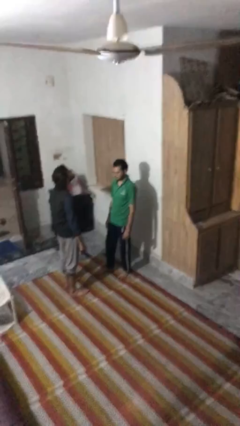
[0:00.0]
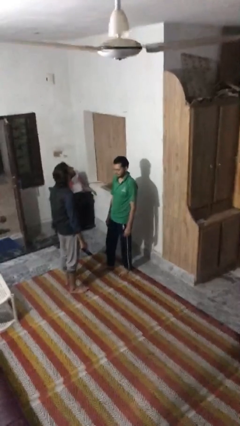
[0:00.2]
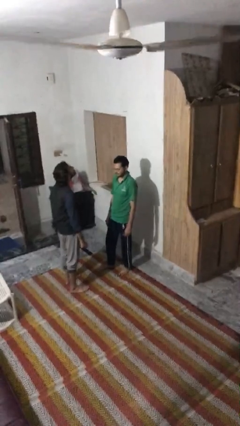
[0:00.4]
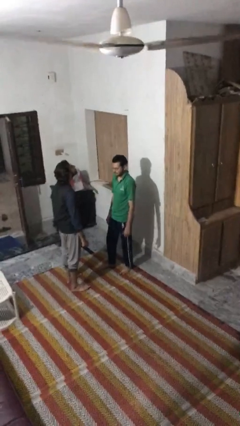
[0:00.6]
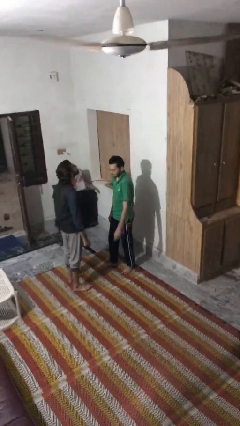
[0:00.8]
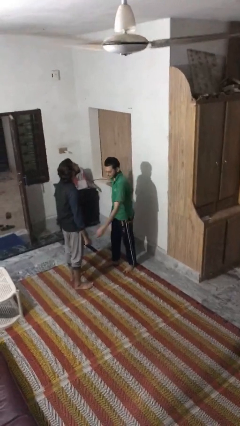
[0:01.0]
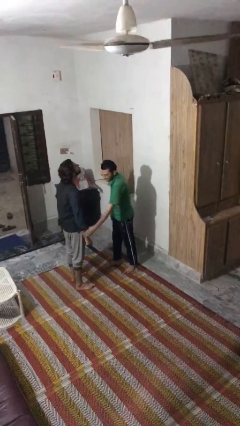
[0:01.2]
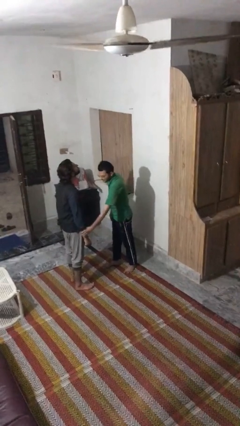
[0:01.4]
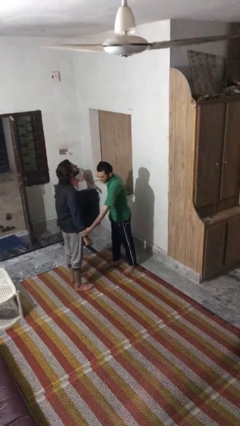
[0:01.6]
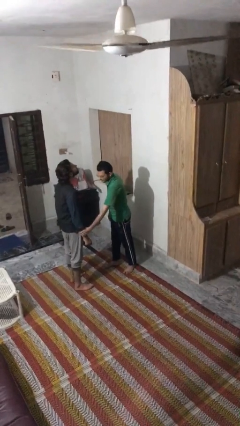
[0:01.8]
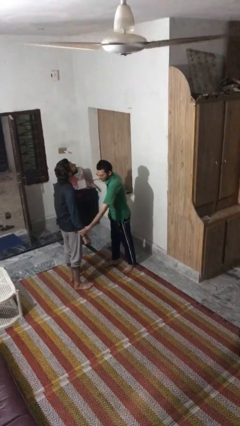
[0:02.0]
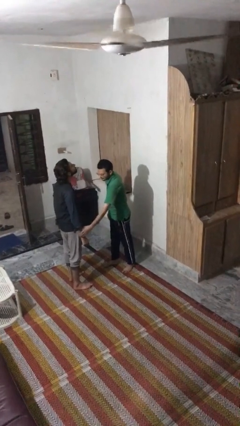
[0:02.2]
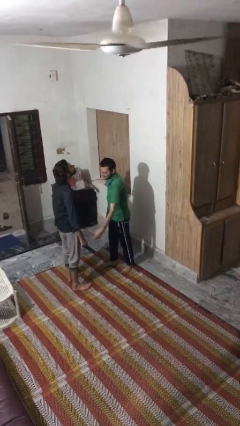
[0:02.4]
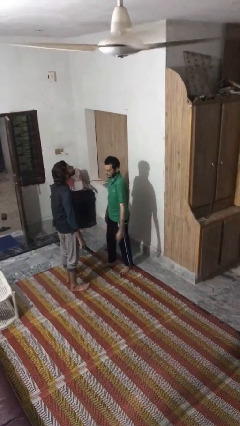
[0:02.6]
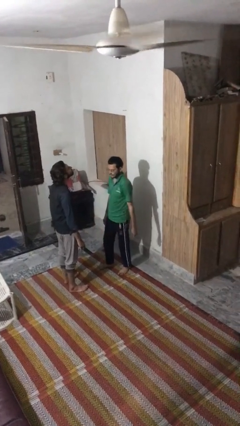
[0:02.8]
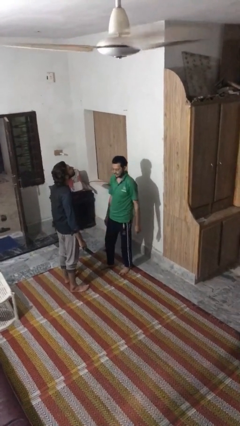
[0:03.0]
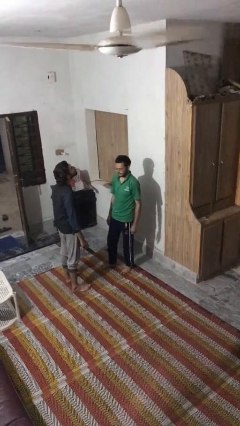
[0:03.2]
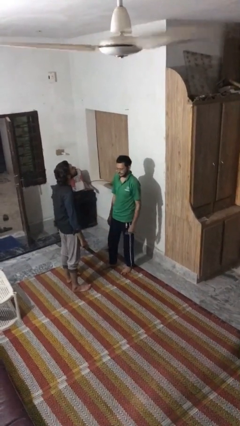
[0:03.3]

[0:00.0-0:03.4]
person grabs person by forearm

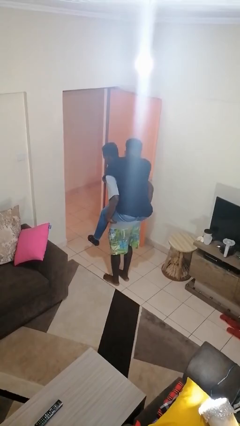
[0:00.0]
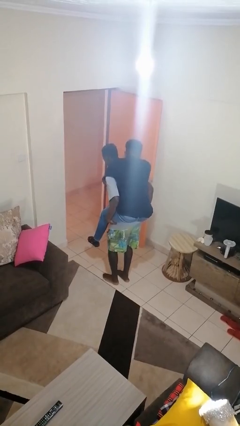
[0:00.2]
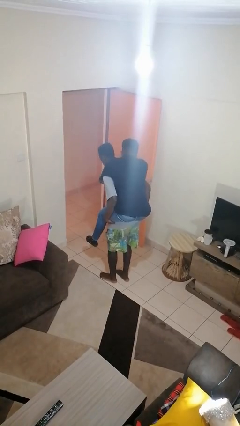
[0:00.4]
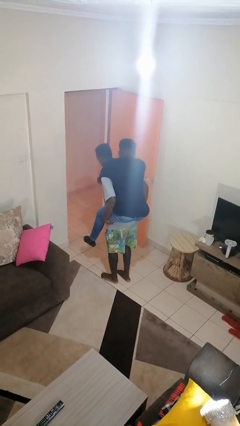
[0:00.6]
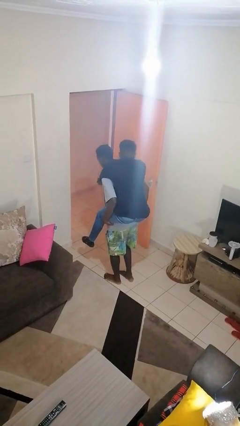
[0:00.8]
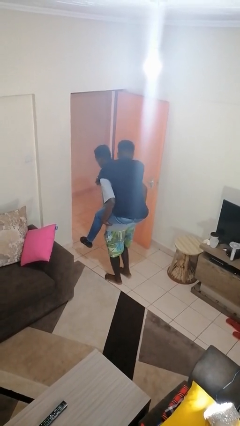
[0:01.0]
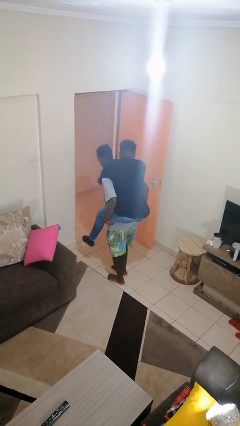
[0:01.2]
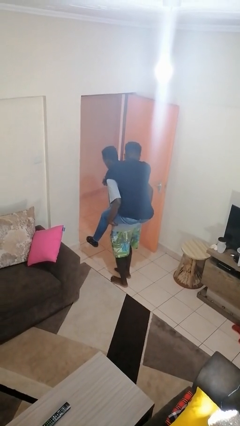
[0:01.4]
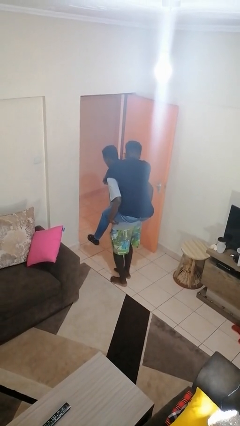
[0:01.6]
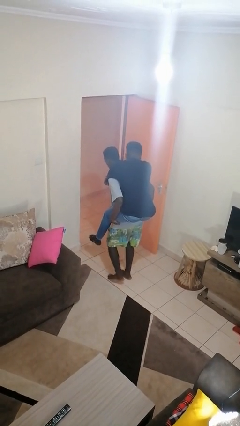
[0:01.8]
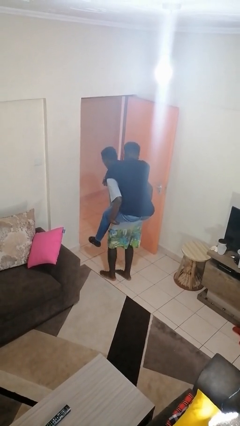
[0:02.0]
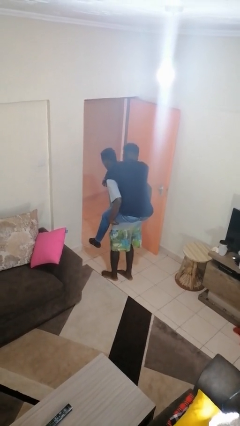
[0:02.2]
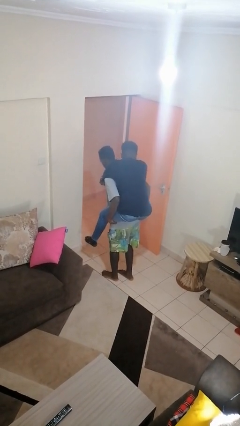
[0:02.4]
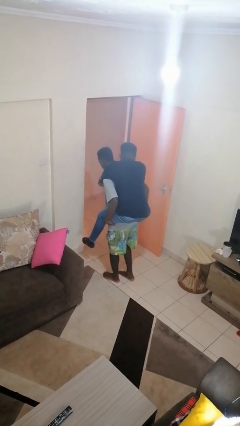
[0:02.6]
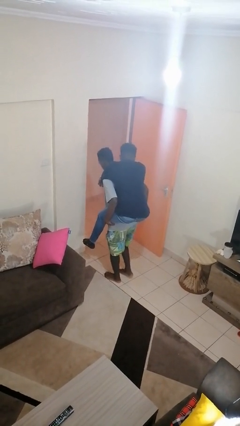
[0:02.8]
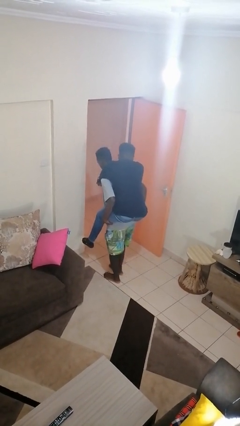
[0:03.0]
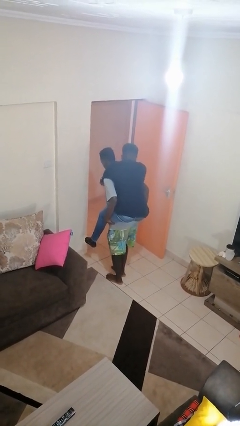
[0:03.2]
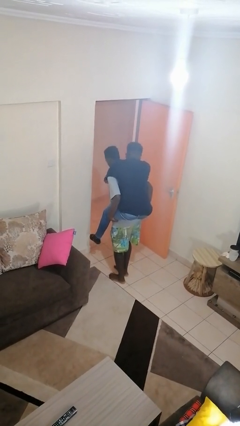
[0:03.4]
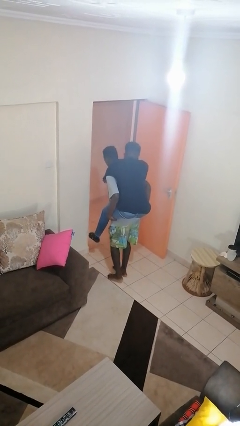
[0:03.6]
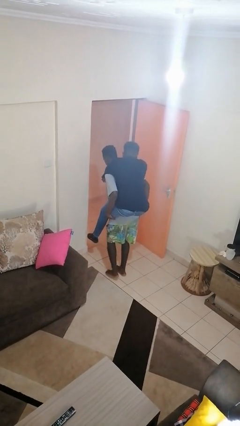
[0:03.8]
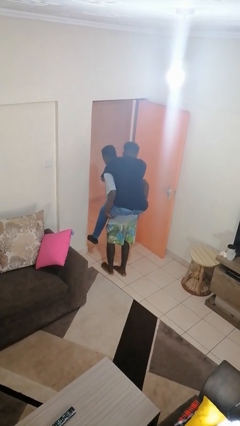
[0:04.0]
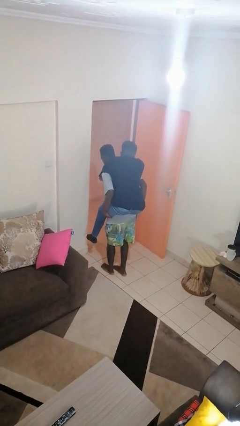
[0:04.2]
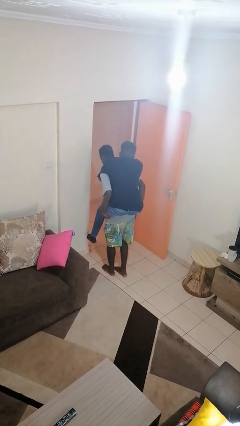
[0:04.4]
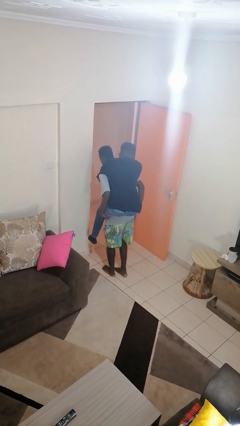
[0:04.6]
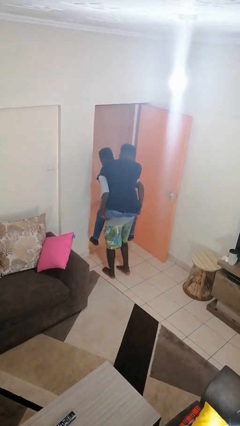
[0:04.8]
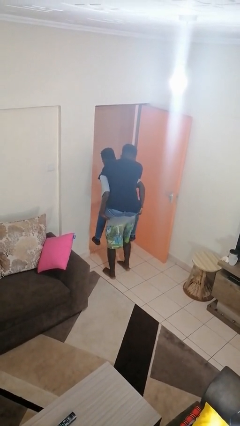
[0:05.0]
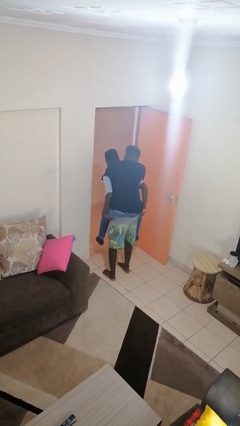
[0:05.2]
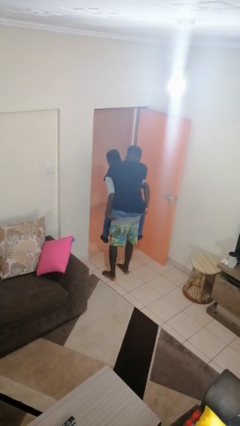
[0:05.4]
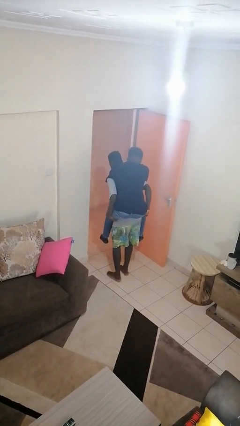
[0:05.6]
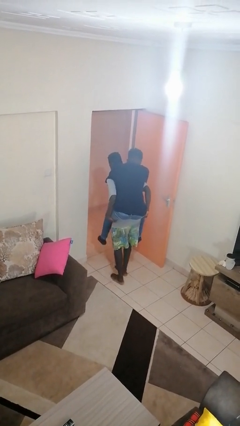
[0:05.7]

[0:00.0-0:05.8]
person carries person on back

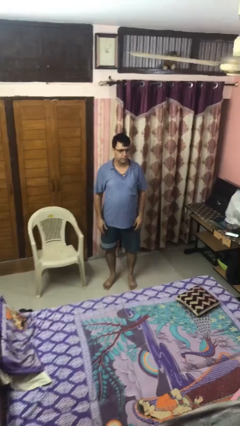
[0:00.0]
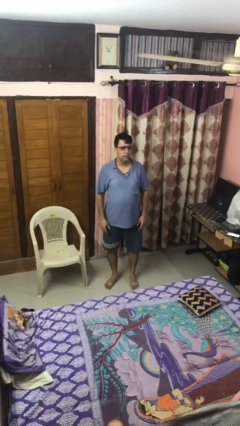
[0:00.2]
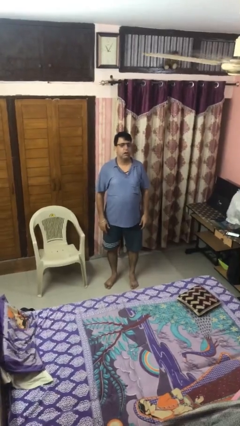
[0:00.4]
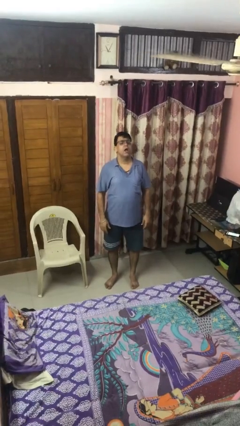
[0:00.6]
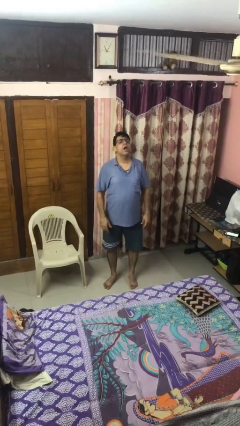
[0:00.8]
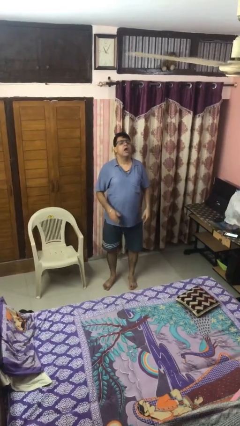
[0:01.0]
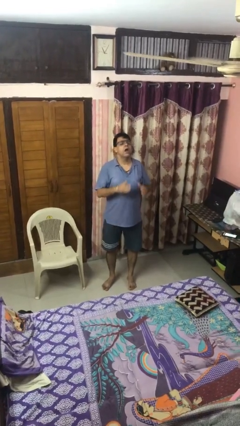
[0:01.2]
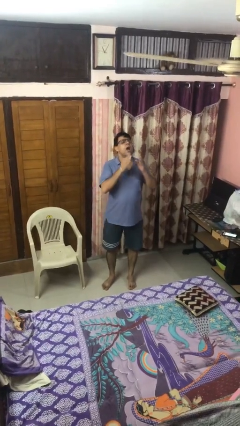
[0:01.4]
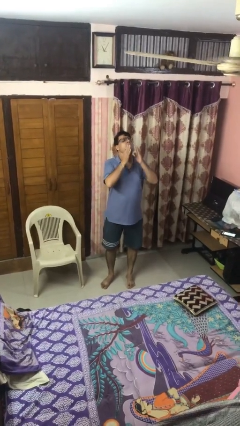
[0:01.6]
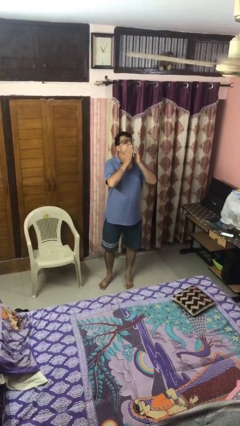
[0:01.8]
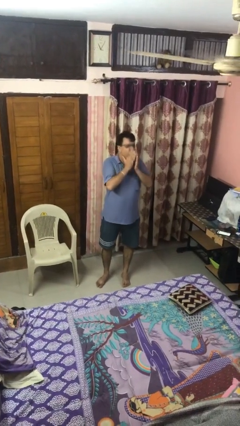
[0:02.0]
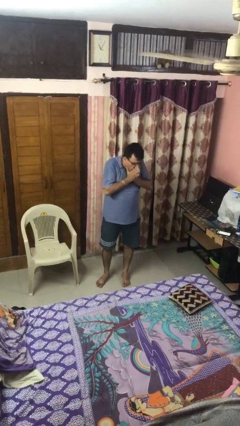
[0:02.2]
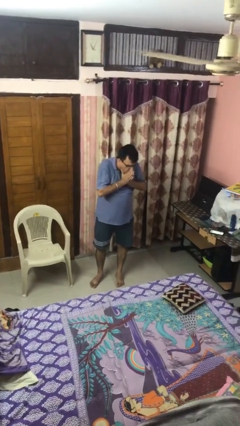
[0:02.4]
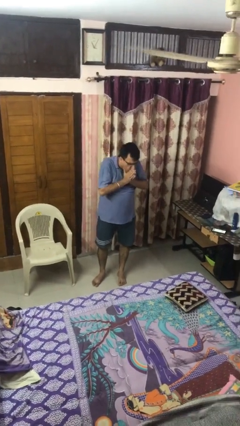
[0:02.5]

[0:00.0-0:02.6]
person sneezes into hand

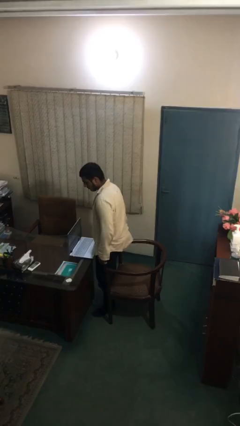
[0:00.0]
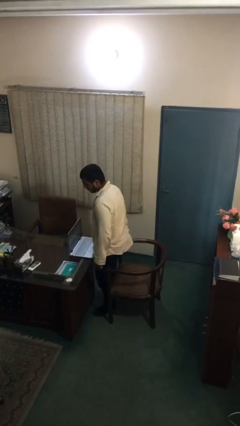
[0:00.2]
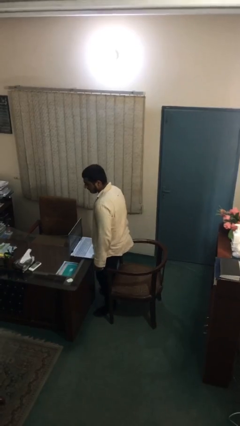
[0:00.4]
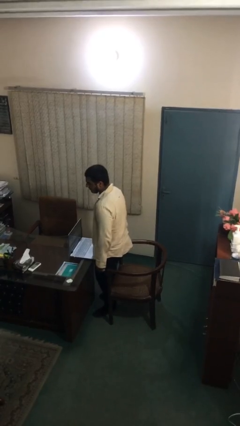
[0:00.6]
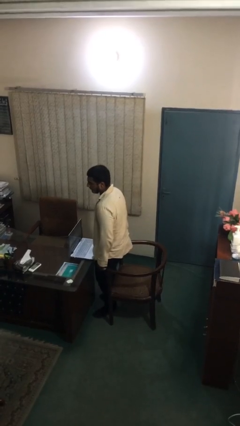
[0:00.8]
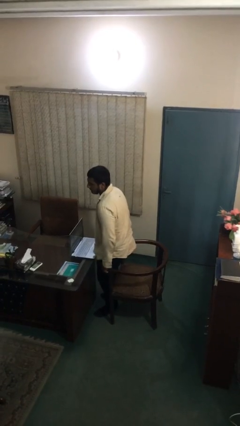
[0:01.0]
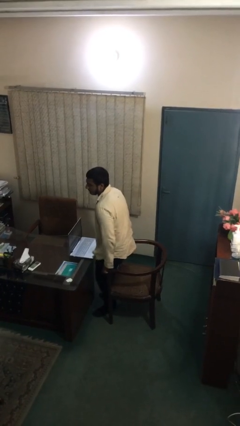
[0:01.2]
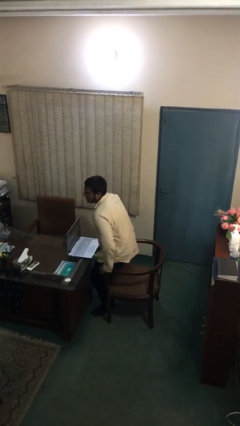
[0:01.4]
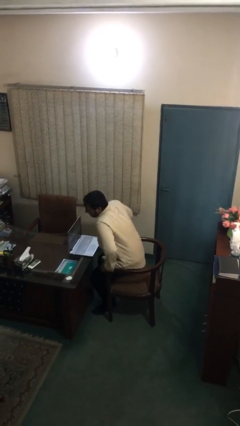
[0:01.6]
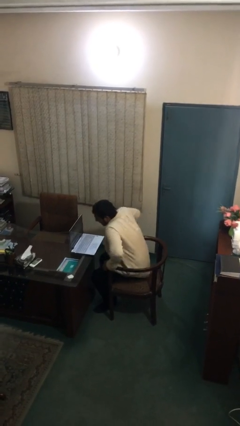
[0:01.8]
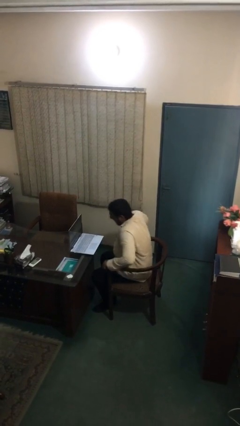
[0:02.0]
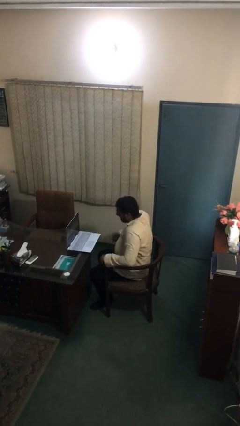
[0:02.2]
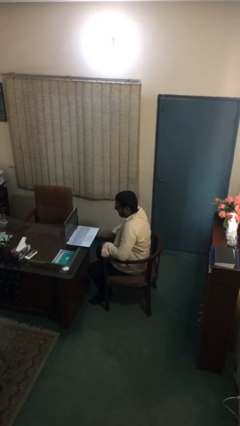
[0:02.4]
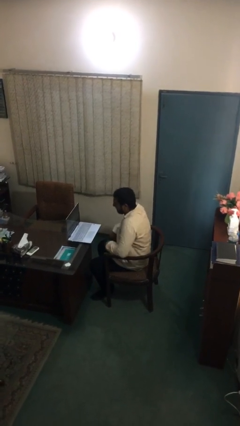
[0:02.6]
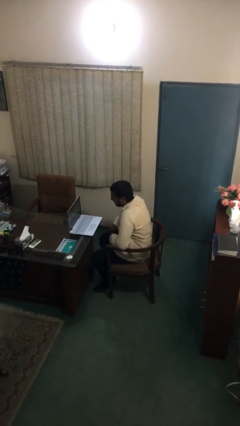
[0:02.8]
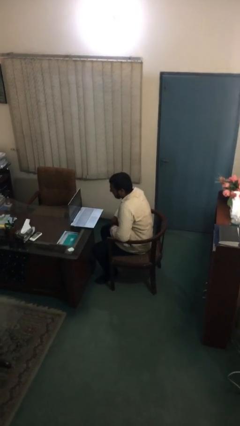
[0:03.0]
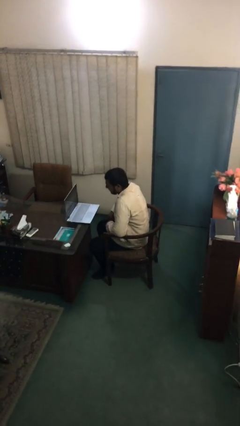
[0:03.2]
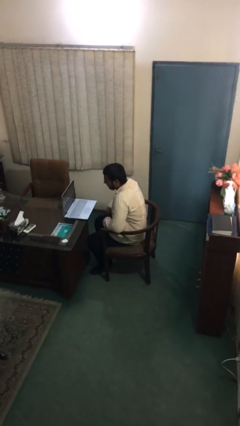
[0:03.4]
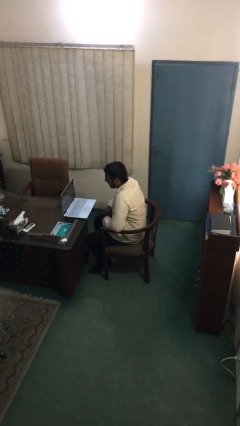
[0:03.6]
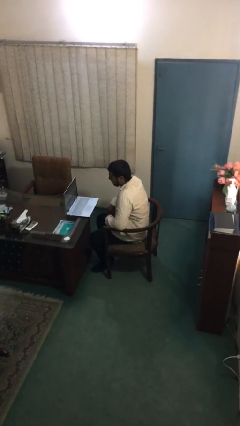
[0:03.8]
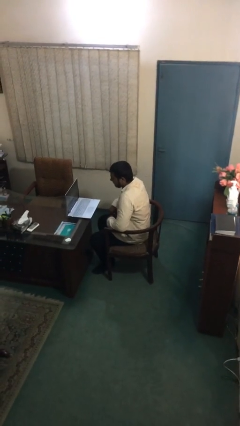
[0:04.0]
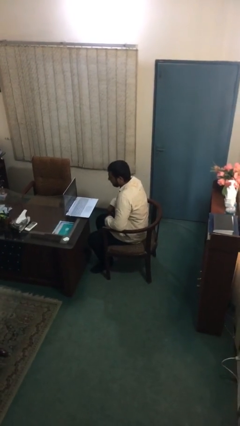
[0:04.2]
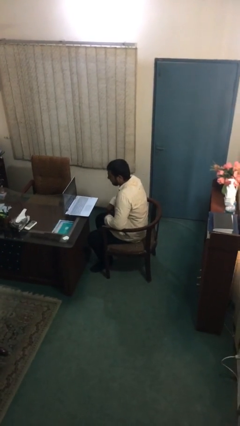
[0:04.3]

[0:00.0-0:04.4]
person sits down

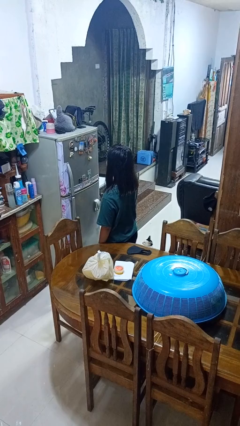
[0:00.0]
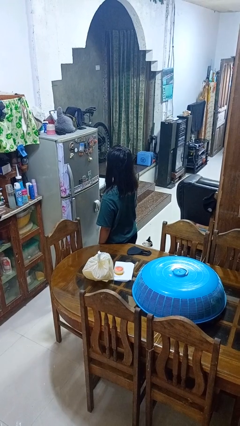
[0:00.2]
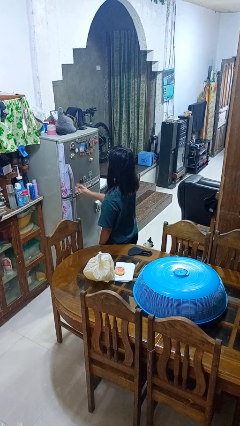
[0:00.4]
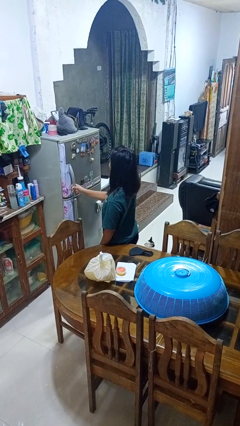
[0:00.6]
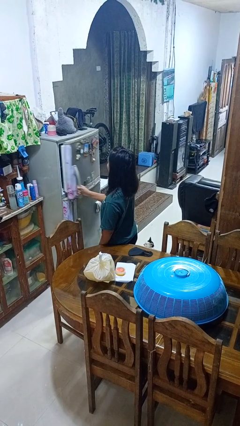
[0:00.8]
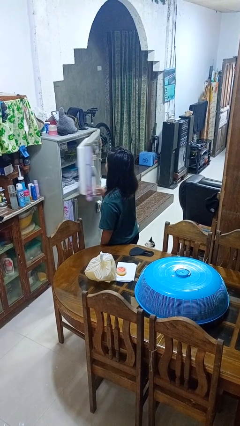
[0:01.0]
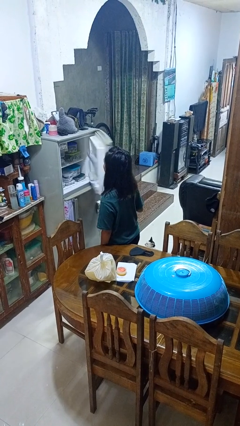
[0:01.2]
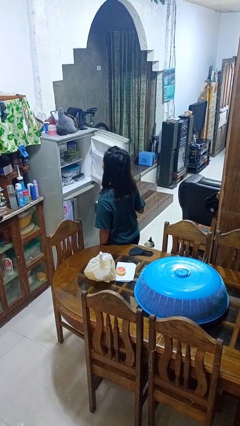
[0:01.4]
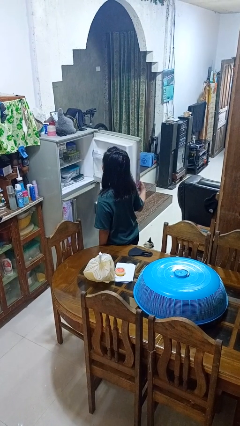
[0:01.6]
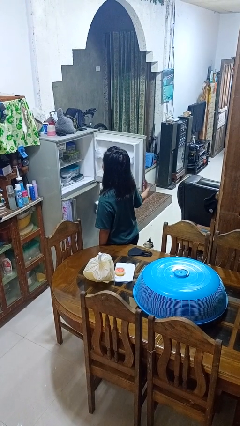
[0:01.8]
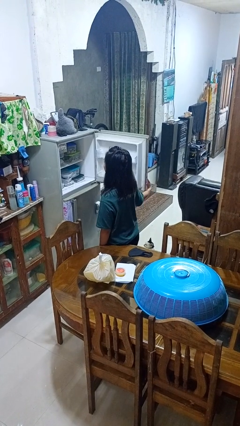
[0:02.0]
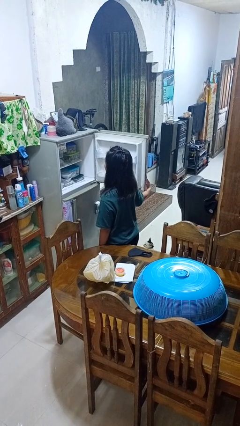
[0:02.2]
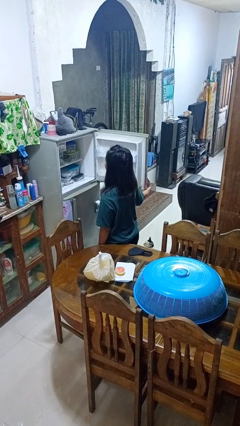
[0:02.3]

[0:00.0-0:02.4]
person opens refrigerator
